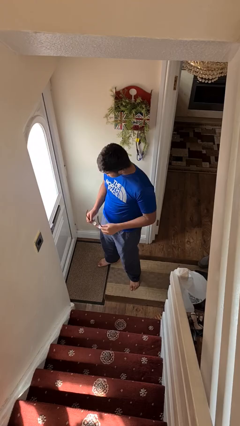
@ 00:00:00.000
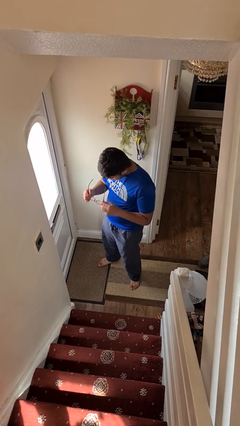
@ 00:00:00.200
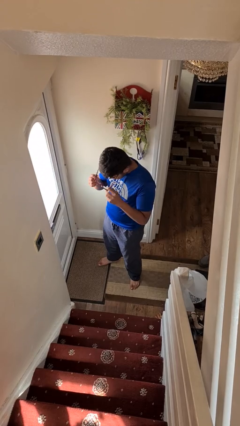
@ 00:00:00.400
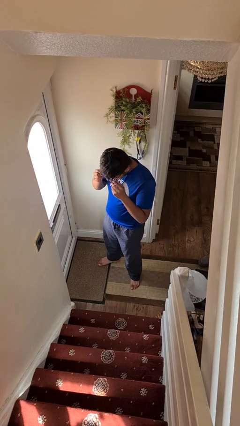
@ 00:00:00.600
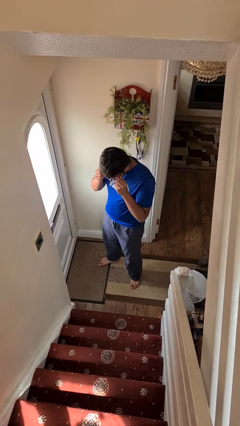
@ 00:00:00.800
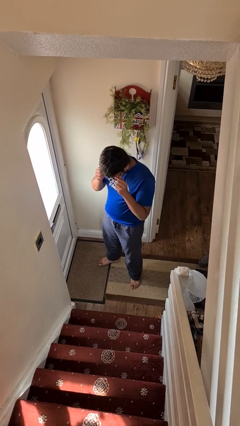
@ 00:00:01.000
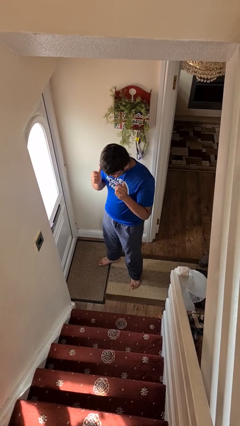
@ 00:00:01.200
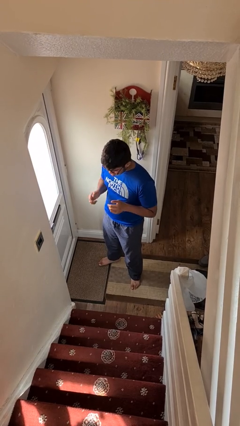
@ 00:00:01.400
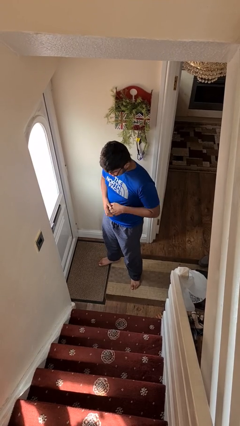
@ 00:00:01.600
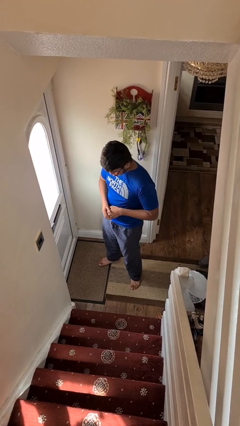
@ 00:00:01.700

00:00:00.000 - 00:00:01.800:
person puts on glasses

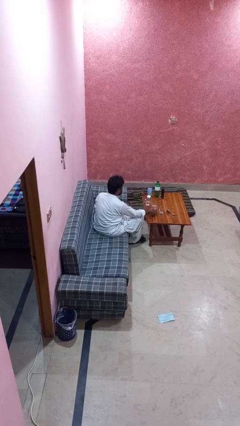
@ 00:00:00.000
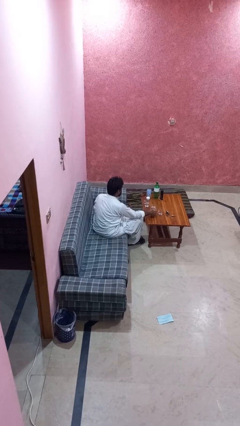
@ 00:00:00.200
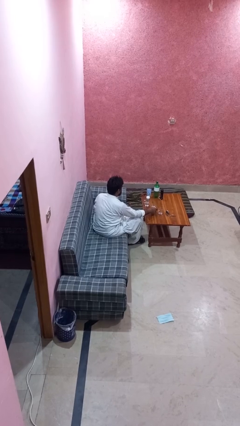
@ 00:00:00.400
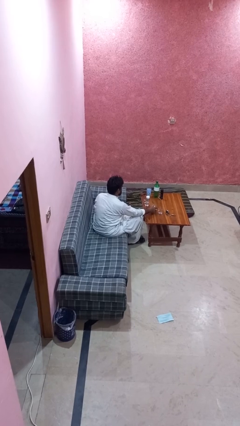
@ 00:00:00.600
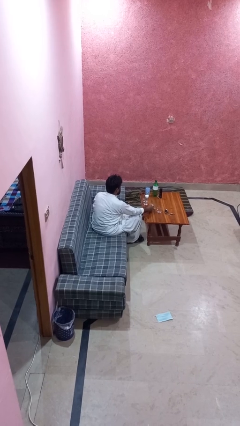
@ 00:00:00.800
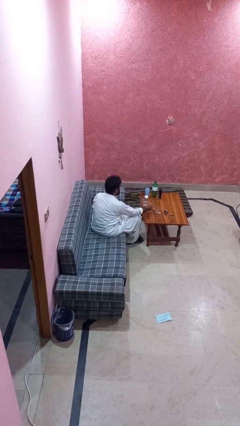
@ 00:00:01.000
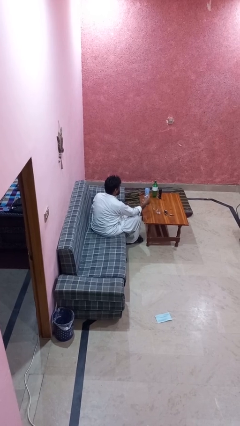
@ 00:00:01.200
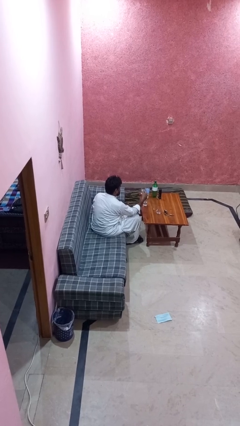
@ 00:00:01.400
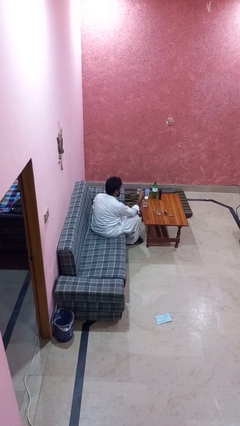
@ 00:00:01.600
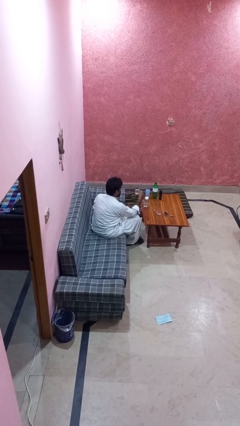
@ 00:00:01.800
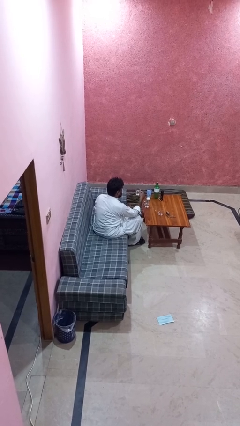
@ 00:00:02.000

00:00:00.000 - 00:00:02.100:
person picks up object from table

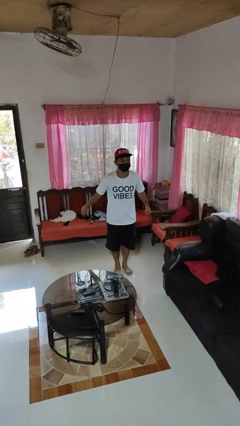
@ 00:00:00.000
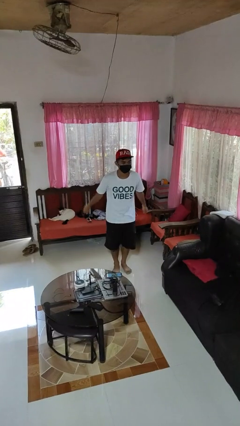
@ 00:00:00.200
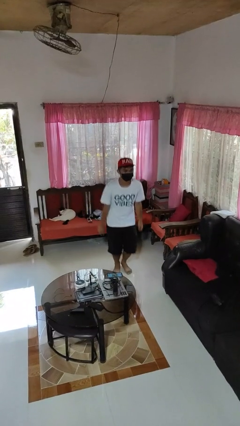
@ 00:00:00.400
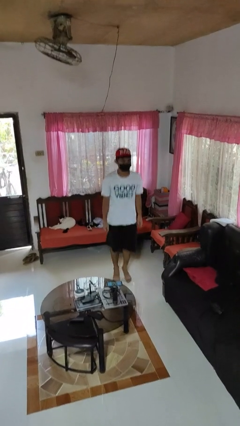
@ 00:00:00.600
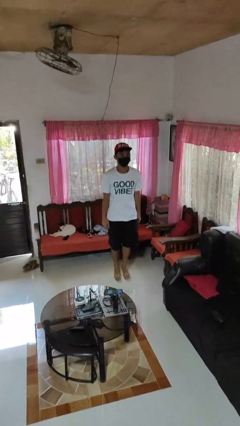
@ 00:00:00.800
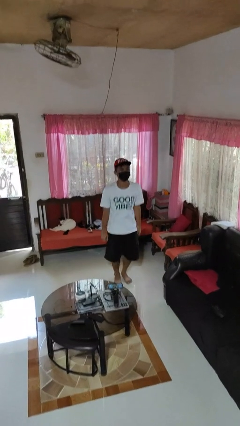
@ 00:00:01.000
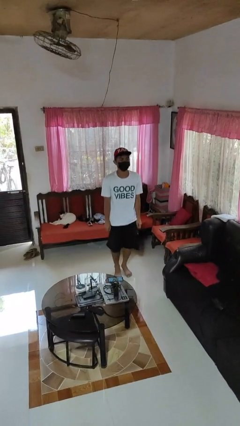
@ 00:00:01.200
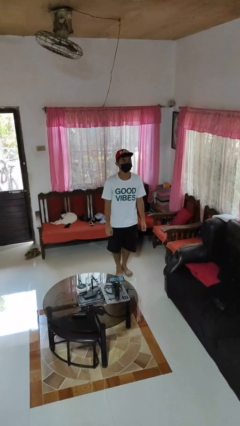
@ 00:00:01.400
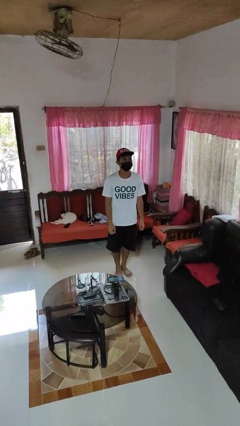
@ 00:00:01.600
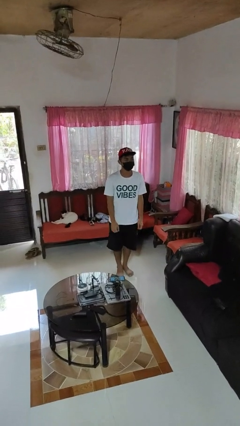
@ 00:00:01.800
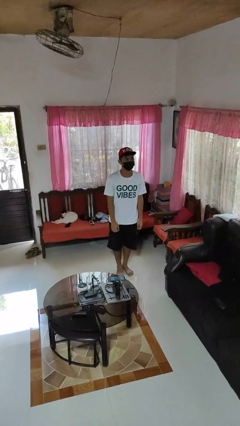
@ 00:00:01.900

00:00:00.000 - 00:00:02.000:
person jumps

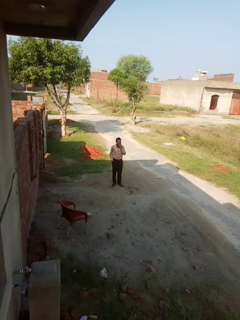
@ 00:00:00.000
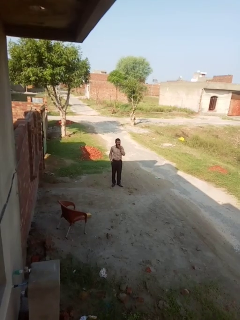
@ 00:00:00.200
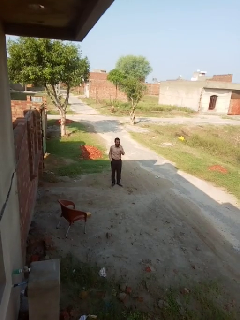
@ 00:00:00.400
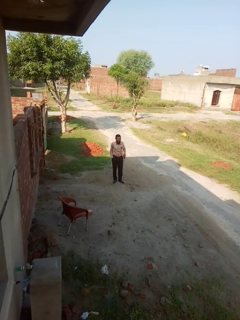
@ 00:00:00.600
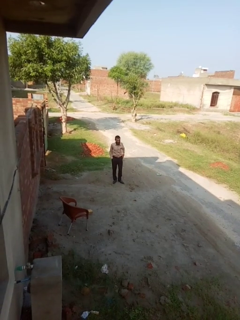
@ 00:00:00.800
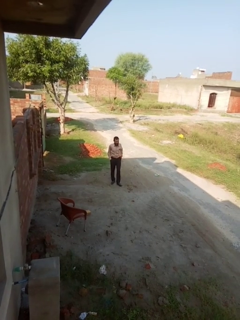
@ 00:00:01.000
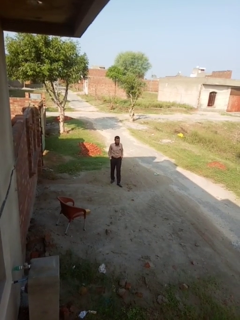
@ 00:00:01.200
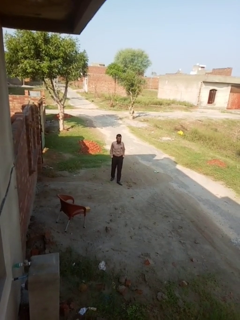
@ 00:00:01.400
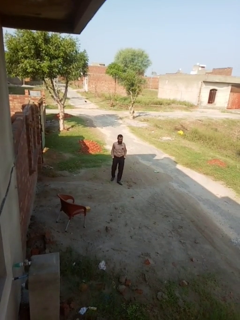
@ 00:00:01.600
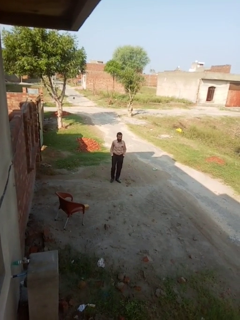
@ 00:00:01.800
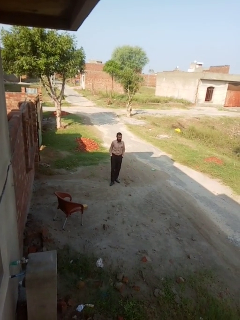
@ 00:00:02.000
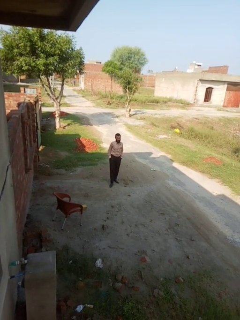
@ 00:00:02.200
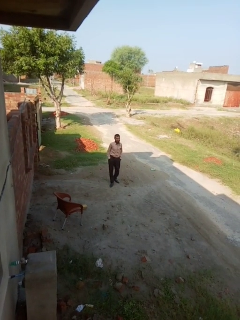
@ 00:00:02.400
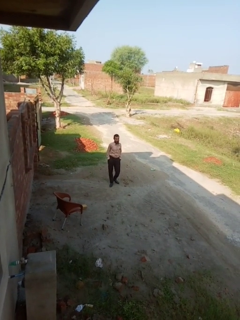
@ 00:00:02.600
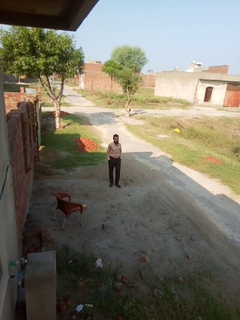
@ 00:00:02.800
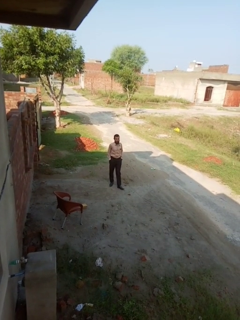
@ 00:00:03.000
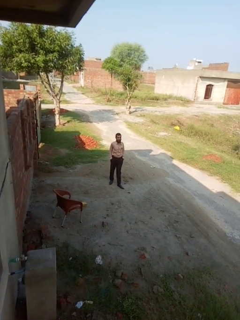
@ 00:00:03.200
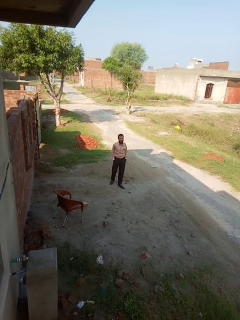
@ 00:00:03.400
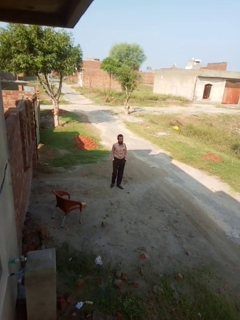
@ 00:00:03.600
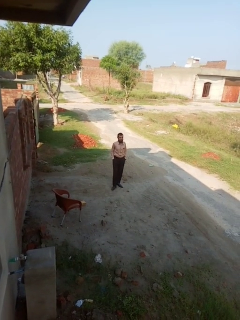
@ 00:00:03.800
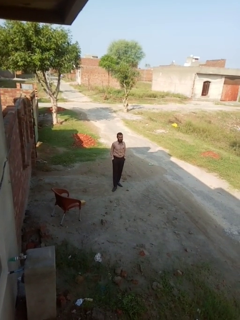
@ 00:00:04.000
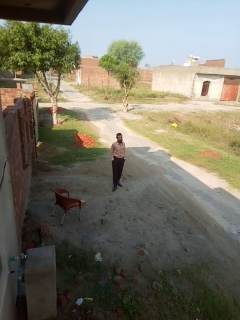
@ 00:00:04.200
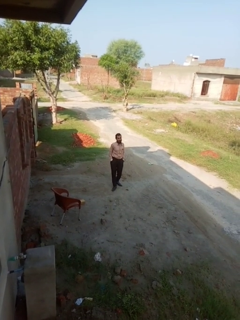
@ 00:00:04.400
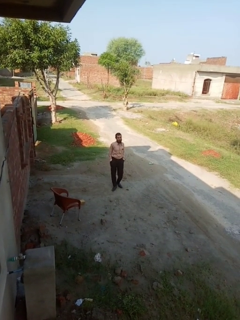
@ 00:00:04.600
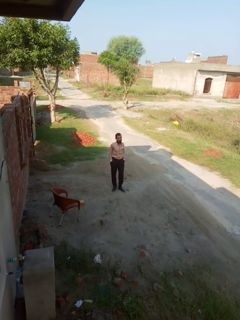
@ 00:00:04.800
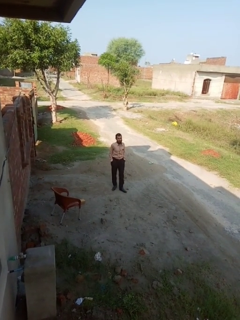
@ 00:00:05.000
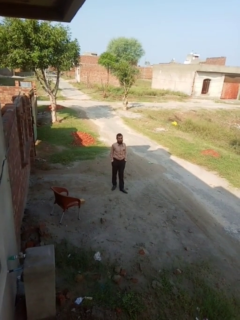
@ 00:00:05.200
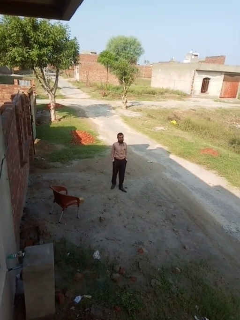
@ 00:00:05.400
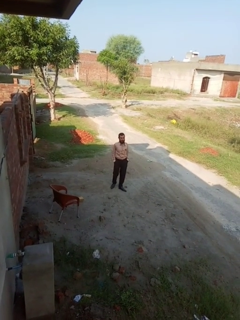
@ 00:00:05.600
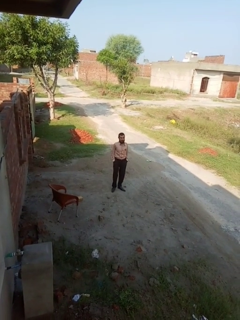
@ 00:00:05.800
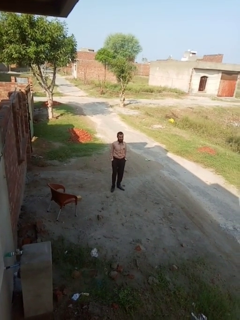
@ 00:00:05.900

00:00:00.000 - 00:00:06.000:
person walks tiptoe

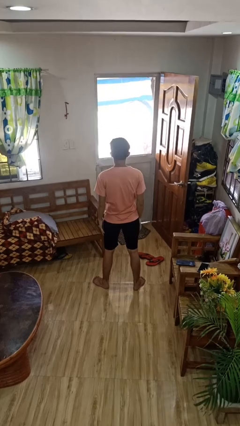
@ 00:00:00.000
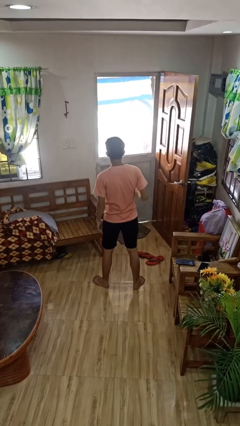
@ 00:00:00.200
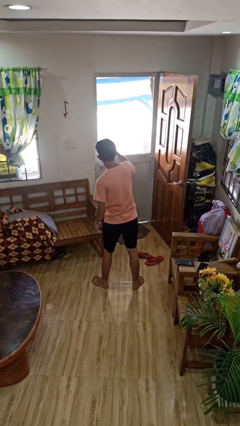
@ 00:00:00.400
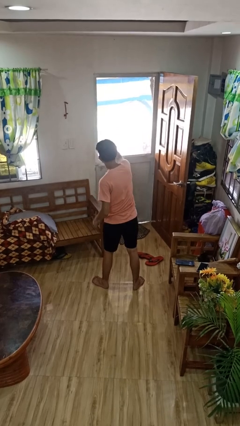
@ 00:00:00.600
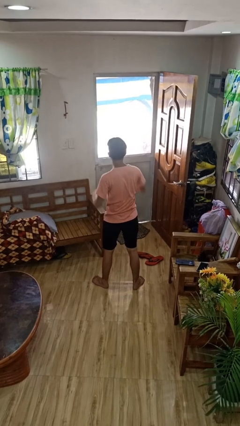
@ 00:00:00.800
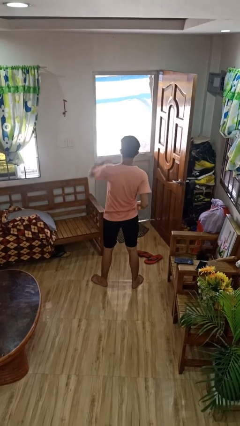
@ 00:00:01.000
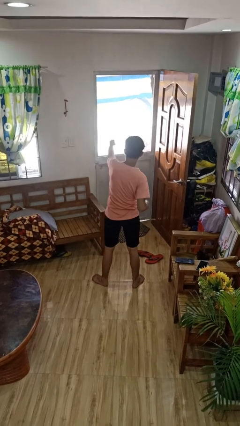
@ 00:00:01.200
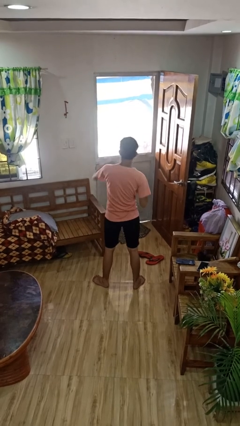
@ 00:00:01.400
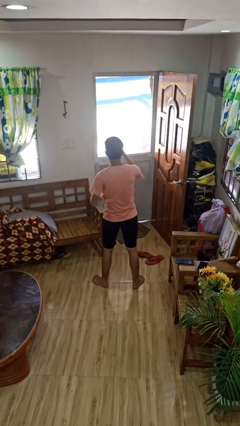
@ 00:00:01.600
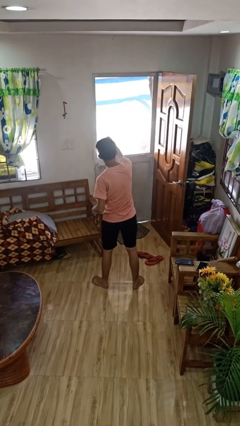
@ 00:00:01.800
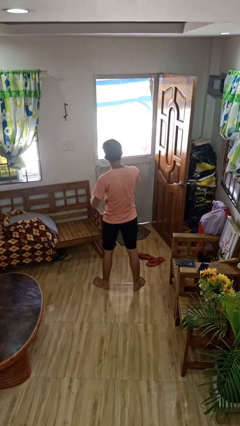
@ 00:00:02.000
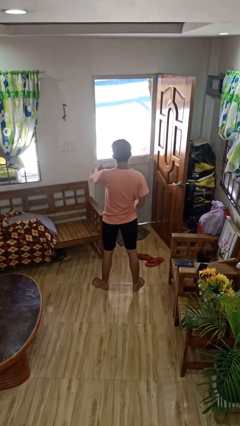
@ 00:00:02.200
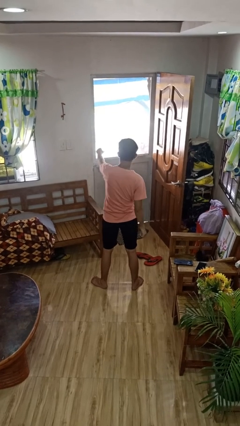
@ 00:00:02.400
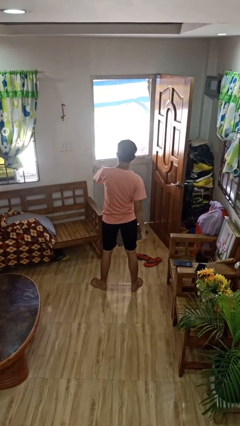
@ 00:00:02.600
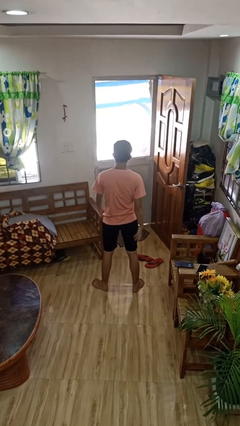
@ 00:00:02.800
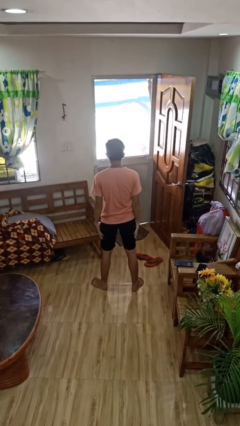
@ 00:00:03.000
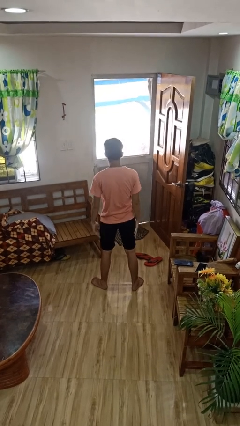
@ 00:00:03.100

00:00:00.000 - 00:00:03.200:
person punches

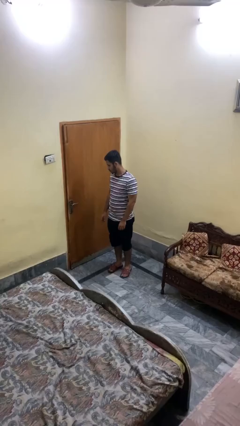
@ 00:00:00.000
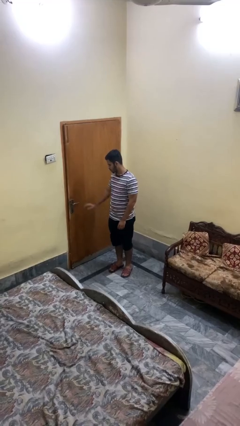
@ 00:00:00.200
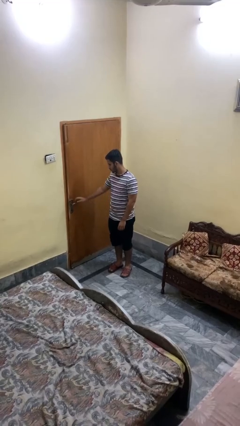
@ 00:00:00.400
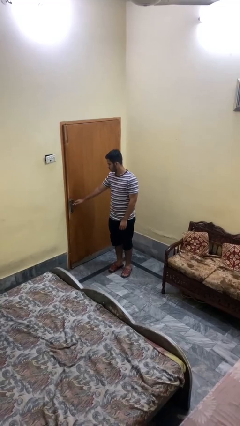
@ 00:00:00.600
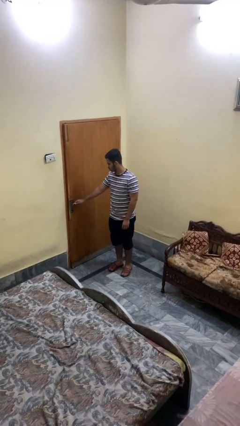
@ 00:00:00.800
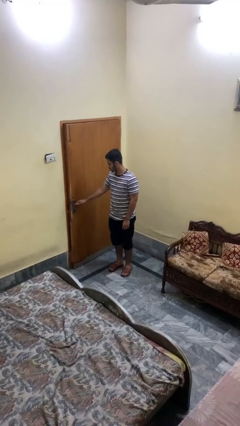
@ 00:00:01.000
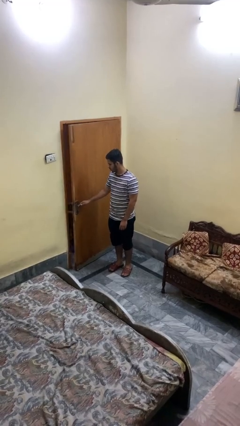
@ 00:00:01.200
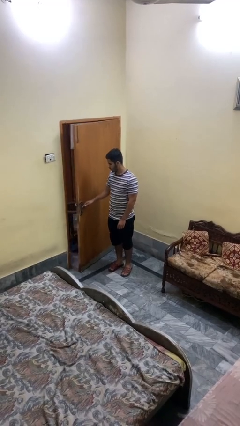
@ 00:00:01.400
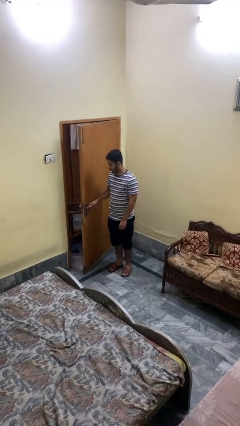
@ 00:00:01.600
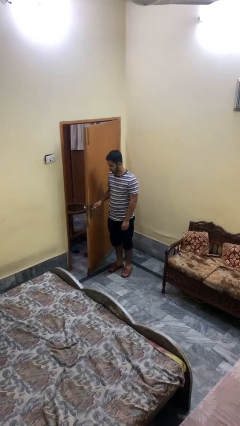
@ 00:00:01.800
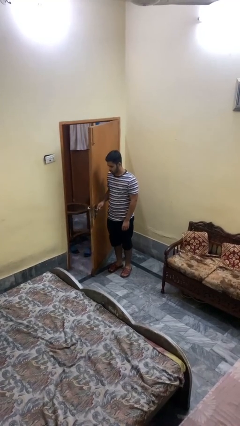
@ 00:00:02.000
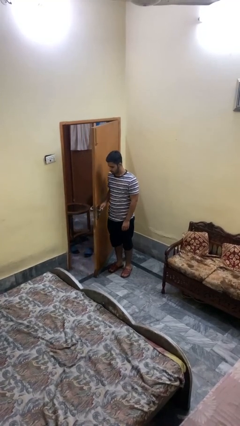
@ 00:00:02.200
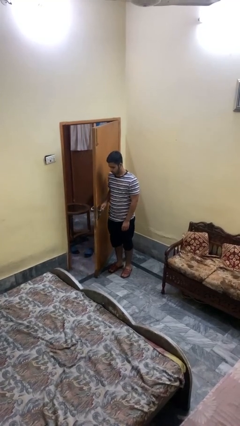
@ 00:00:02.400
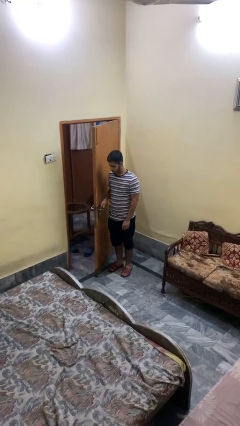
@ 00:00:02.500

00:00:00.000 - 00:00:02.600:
person opens facility door

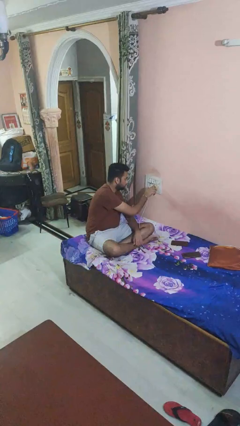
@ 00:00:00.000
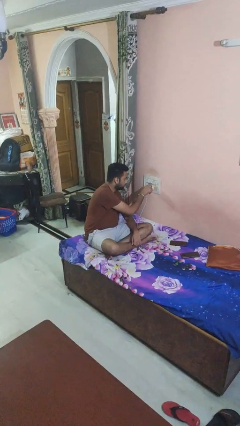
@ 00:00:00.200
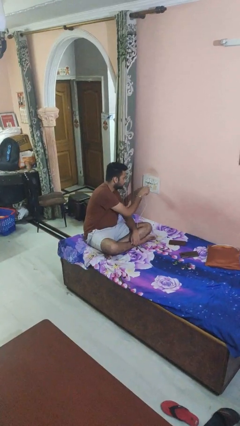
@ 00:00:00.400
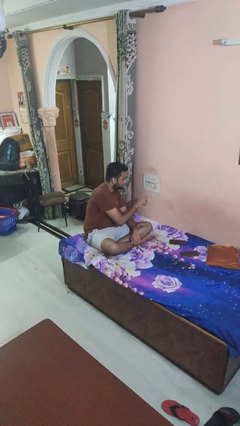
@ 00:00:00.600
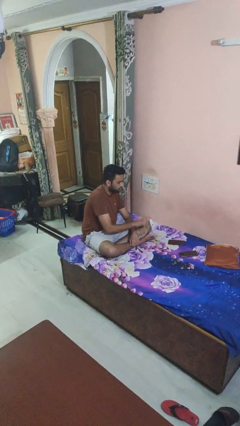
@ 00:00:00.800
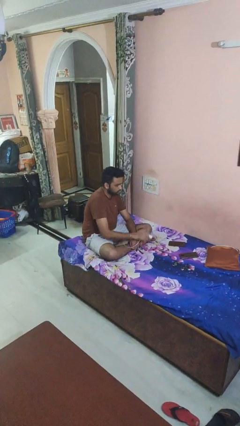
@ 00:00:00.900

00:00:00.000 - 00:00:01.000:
person unplugs from electrical socket
